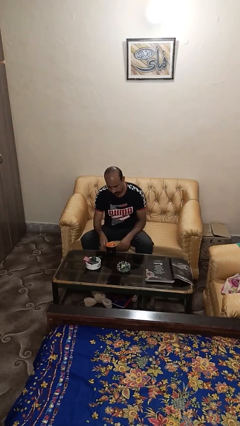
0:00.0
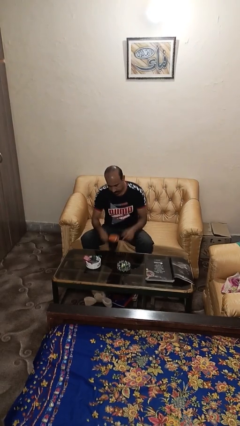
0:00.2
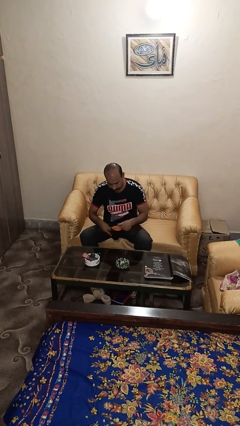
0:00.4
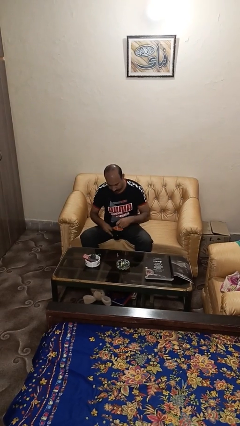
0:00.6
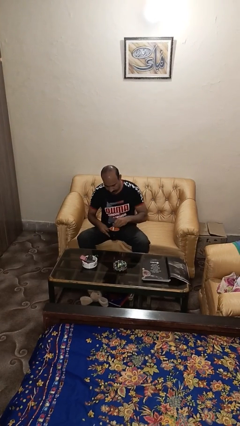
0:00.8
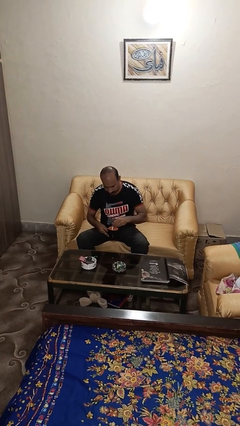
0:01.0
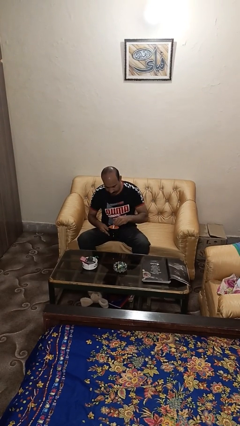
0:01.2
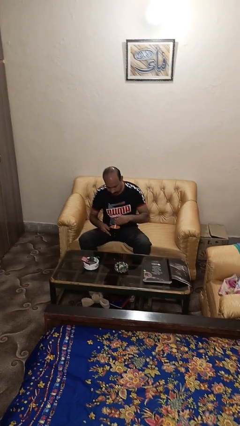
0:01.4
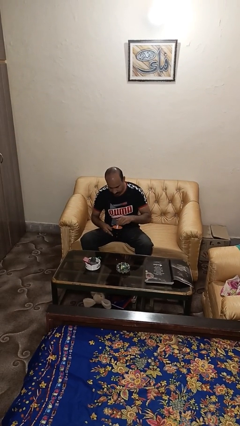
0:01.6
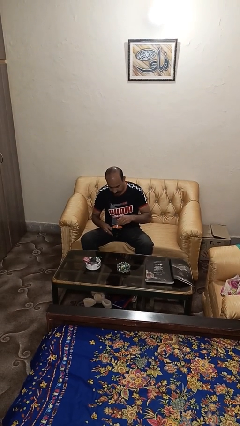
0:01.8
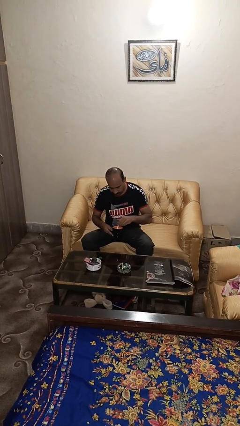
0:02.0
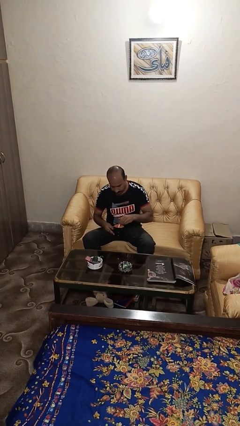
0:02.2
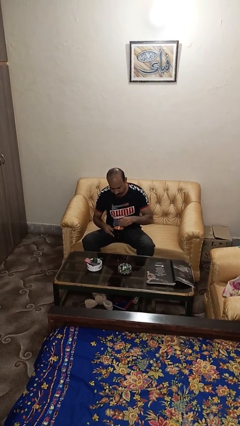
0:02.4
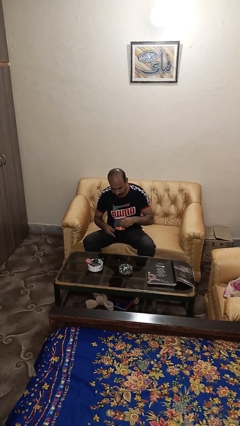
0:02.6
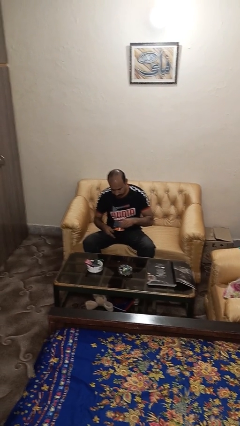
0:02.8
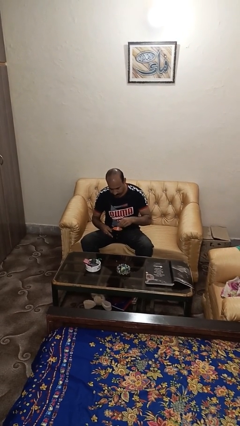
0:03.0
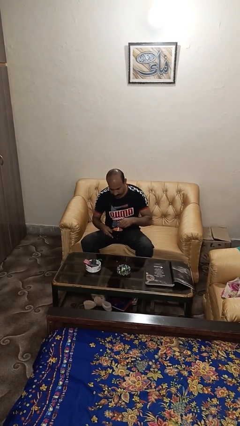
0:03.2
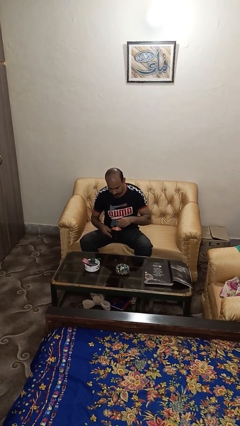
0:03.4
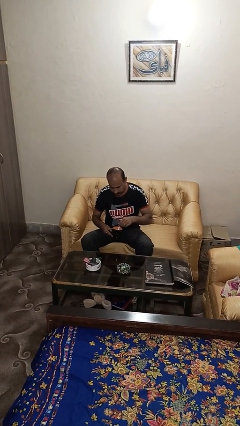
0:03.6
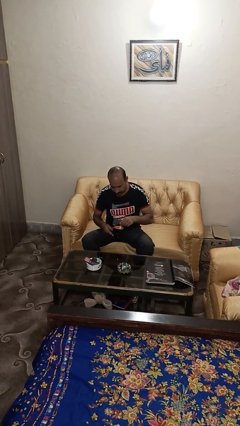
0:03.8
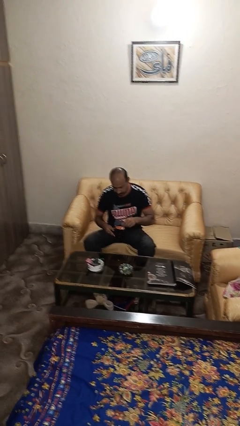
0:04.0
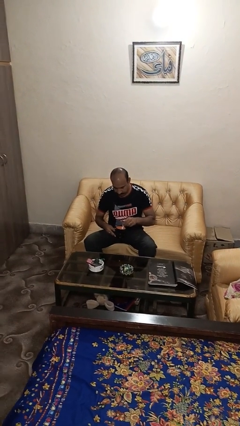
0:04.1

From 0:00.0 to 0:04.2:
person stirs mug

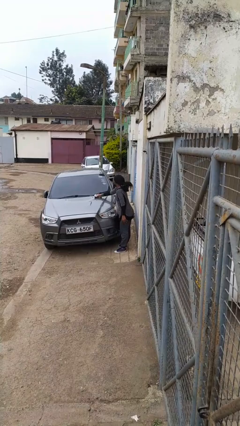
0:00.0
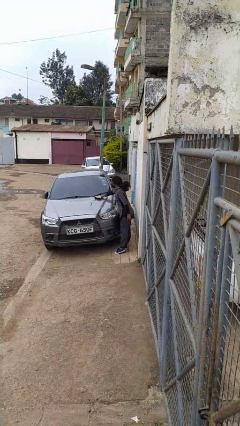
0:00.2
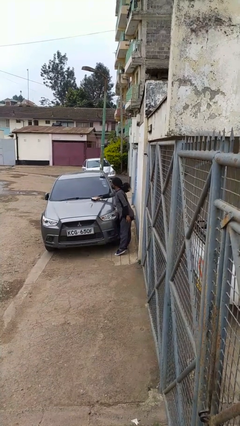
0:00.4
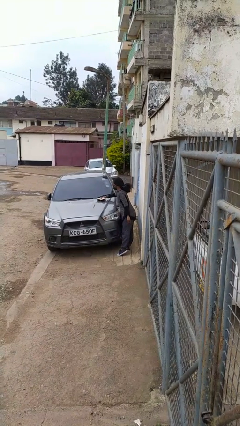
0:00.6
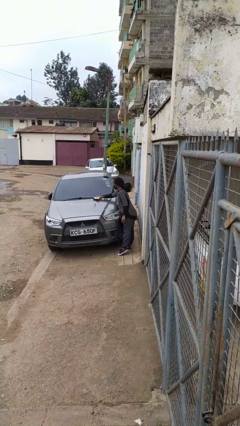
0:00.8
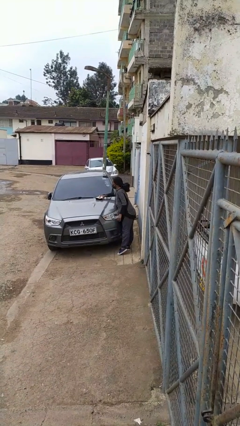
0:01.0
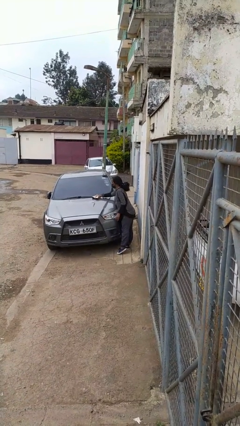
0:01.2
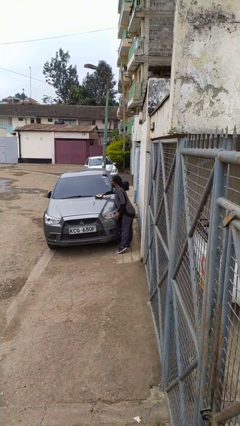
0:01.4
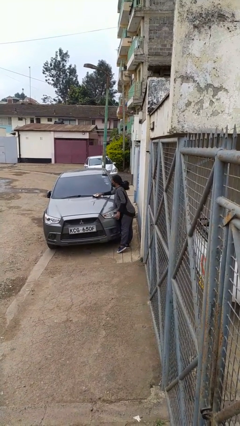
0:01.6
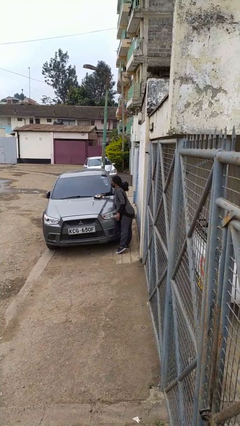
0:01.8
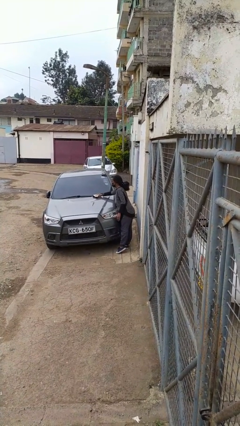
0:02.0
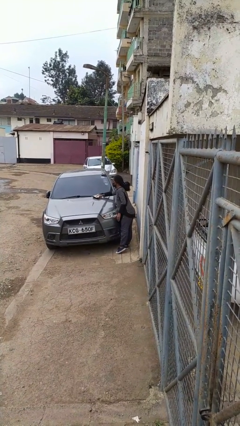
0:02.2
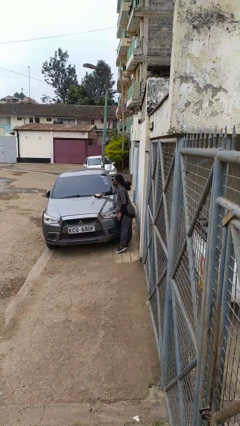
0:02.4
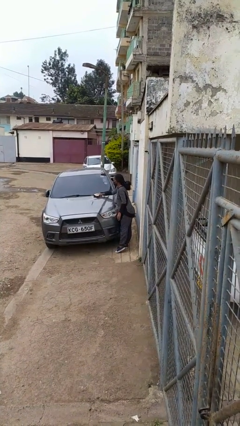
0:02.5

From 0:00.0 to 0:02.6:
person polishes car with rag

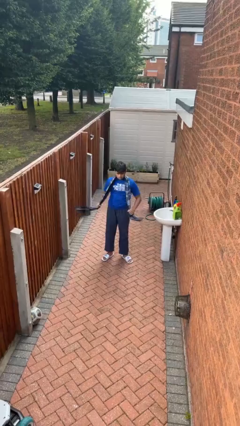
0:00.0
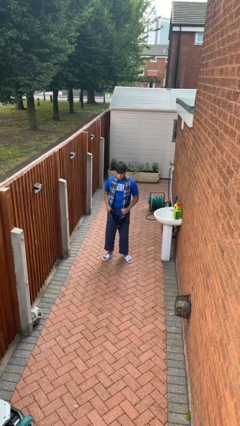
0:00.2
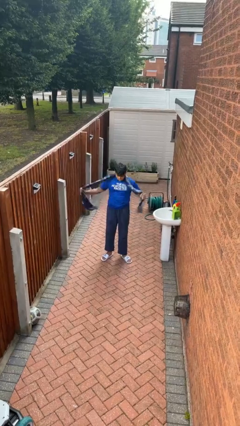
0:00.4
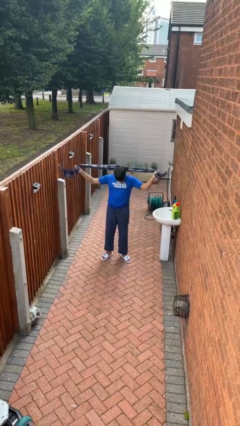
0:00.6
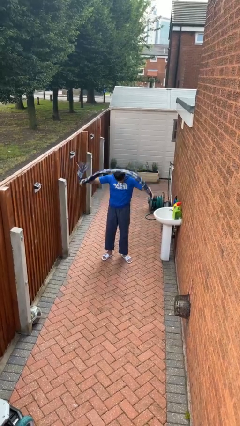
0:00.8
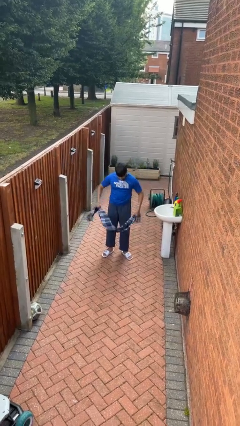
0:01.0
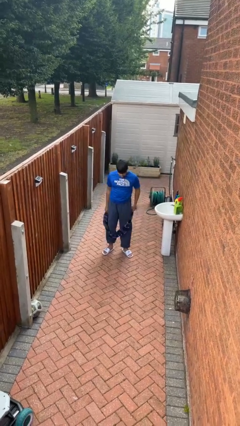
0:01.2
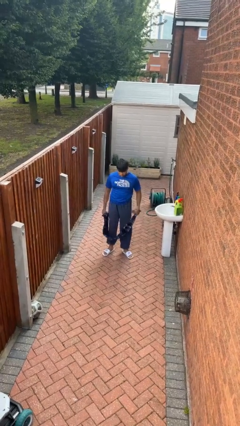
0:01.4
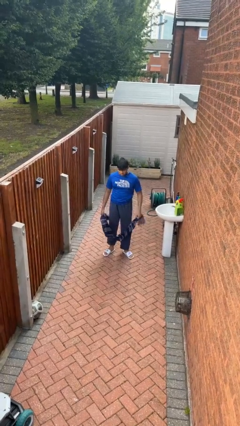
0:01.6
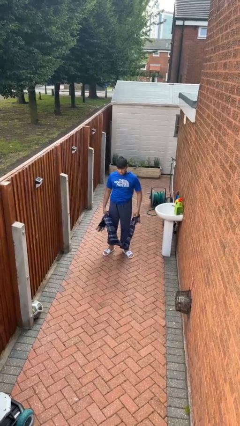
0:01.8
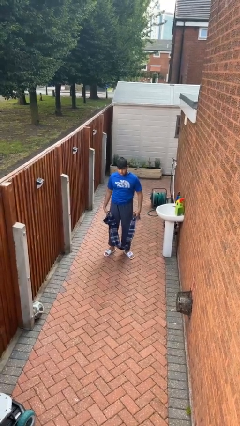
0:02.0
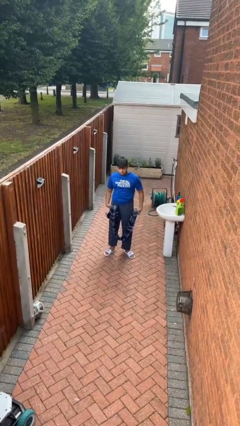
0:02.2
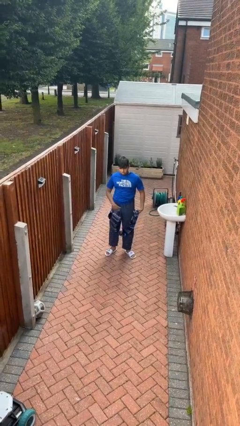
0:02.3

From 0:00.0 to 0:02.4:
person takes off scarf

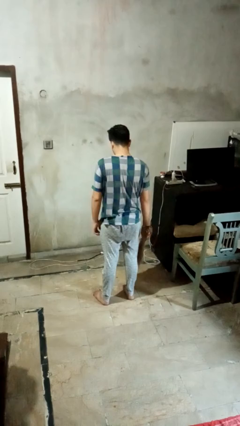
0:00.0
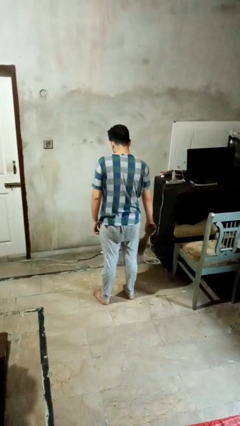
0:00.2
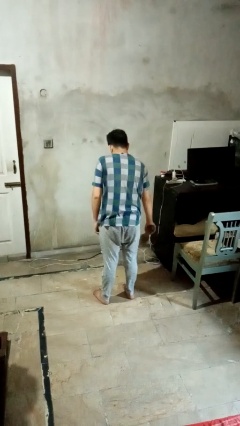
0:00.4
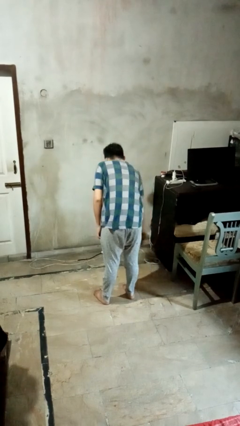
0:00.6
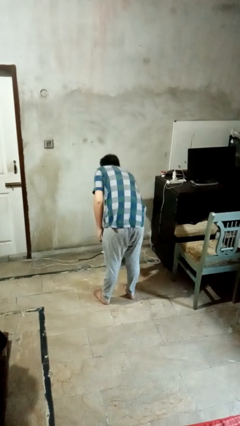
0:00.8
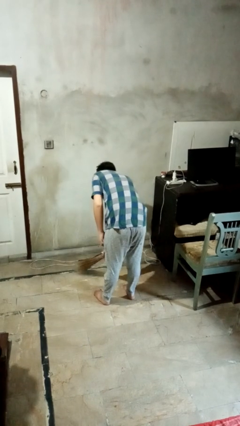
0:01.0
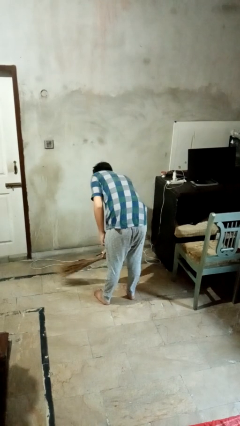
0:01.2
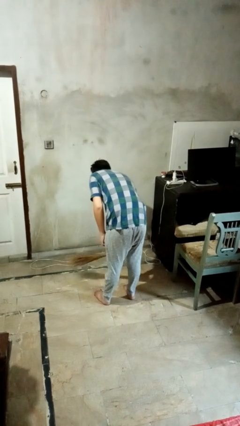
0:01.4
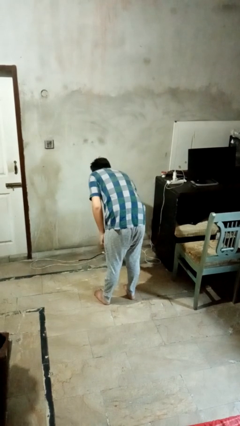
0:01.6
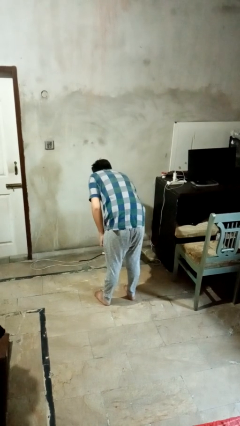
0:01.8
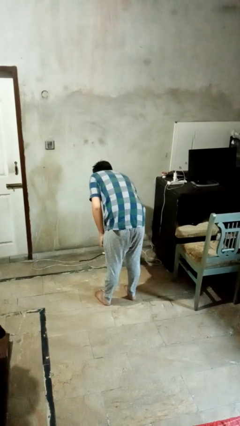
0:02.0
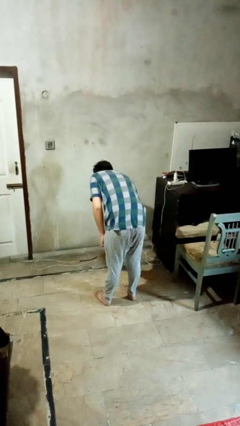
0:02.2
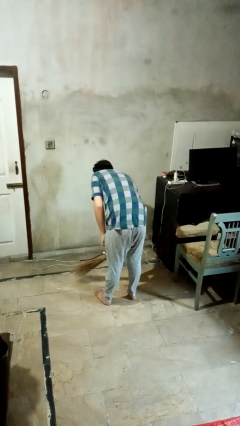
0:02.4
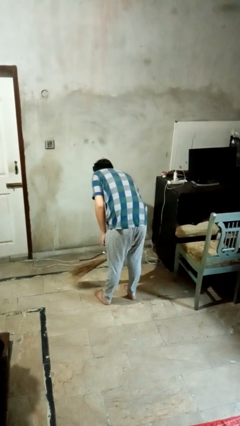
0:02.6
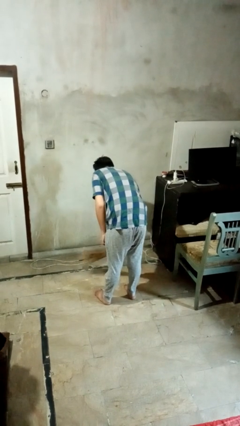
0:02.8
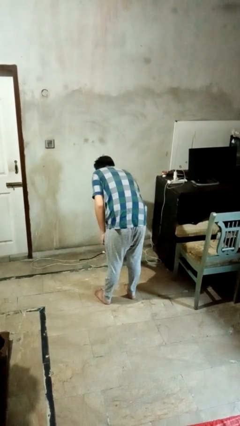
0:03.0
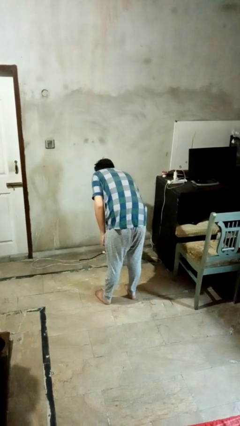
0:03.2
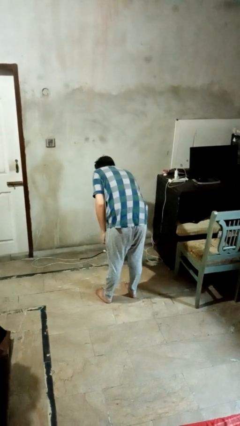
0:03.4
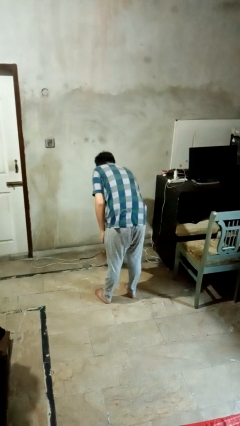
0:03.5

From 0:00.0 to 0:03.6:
person sweeps floor

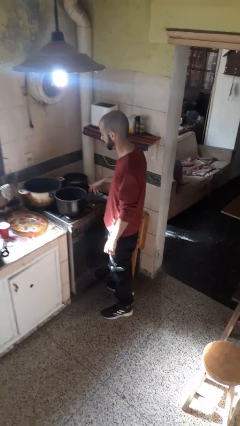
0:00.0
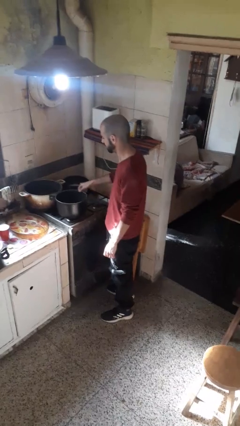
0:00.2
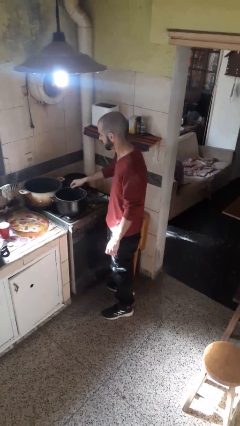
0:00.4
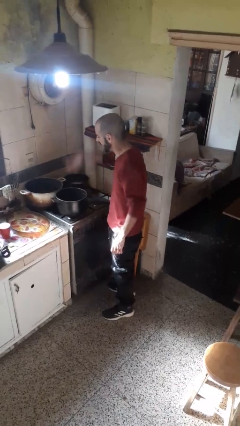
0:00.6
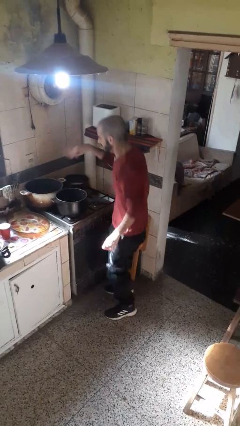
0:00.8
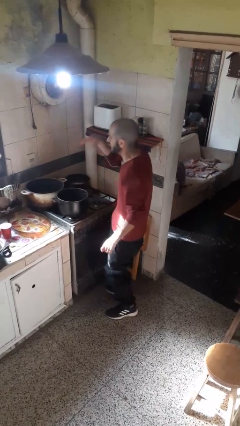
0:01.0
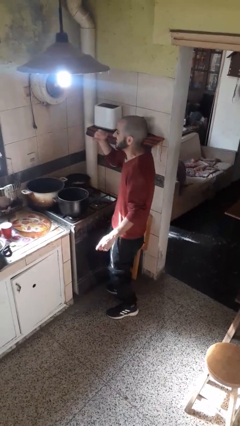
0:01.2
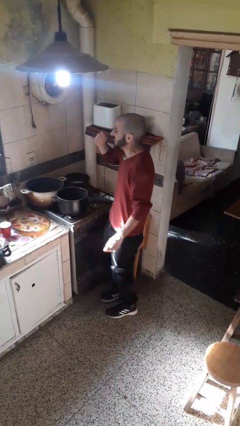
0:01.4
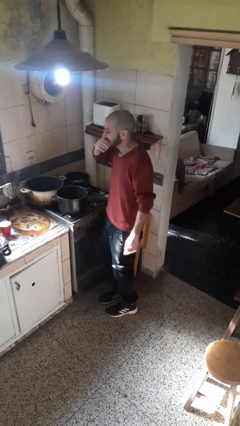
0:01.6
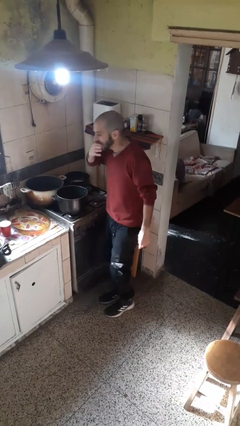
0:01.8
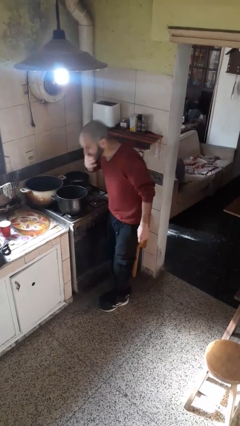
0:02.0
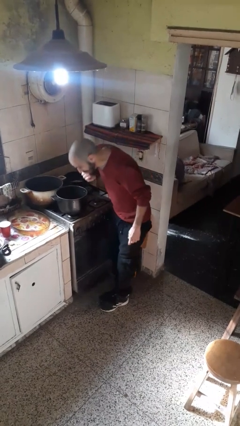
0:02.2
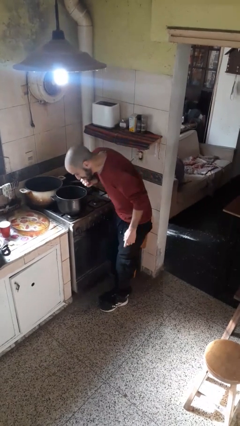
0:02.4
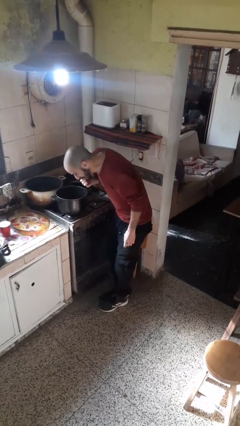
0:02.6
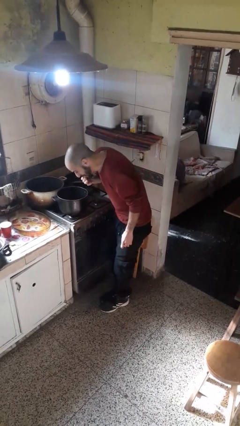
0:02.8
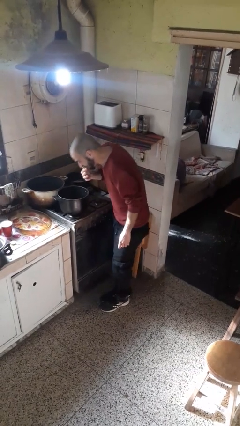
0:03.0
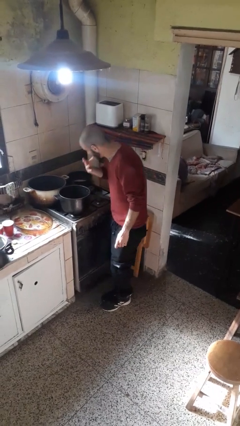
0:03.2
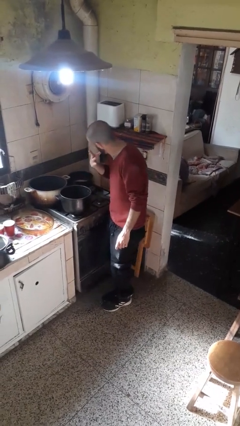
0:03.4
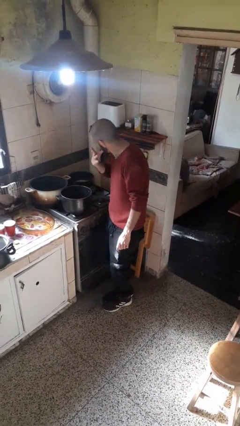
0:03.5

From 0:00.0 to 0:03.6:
person burns hand

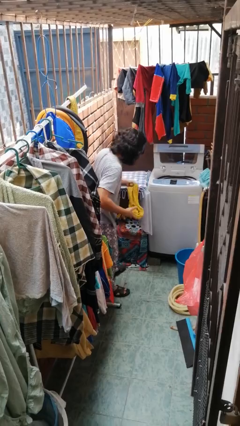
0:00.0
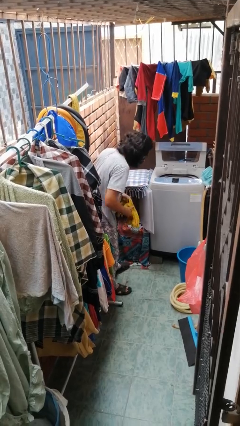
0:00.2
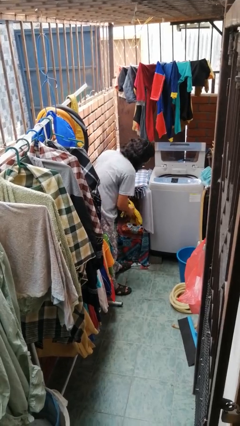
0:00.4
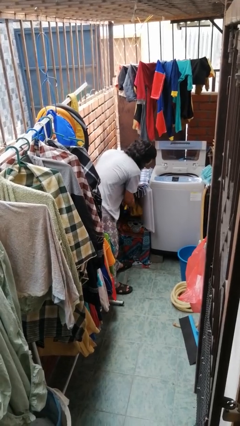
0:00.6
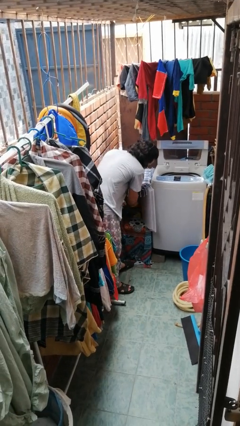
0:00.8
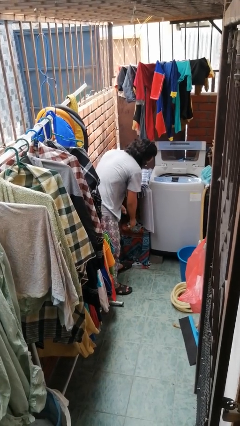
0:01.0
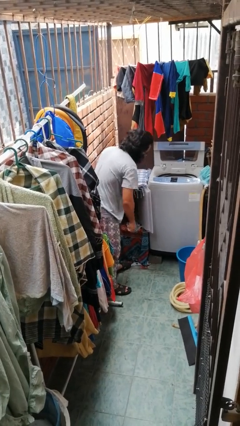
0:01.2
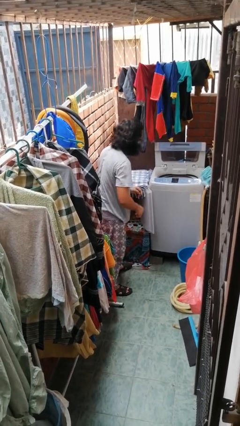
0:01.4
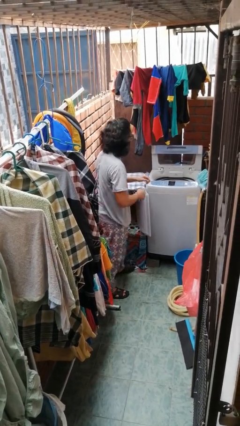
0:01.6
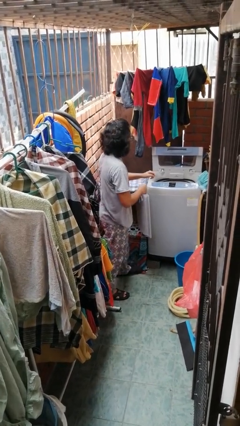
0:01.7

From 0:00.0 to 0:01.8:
person loads dryer
